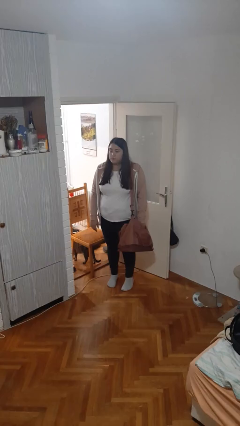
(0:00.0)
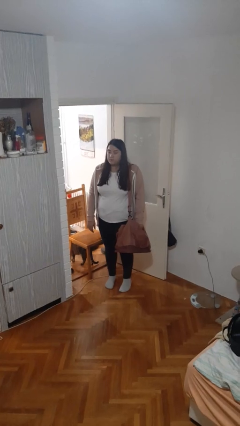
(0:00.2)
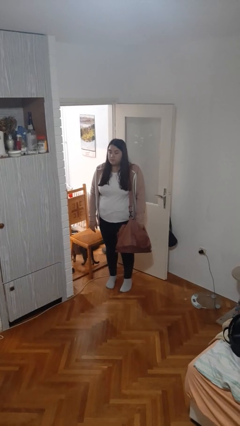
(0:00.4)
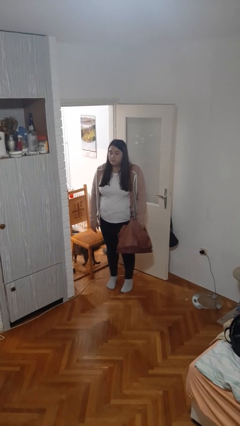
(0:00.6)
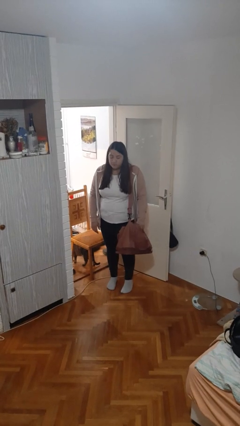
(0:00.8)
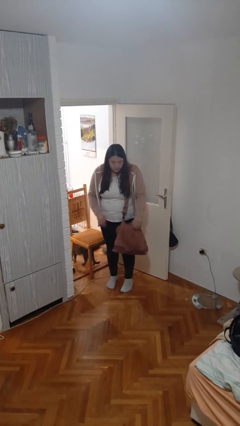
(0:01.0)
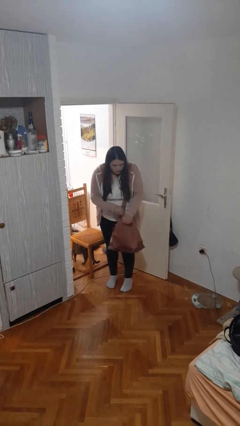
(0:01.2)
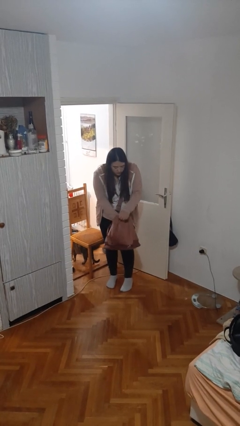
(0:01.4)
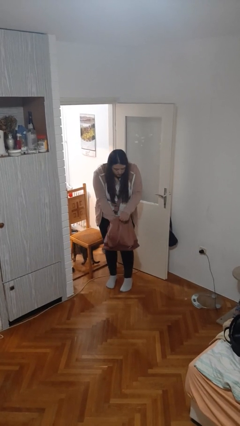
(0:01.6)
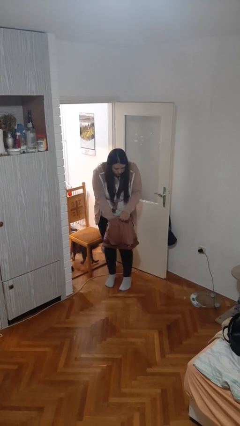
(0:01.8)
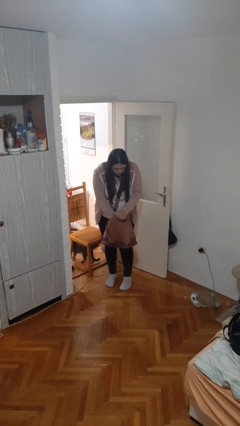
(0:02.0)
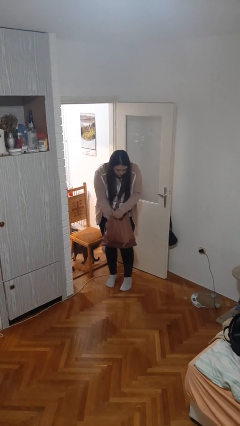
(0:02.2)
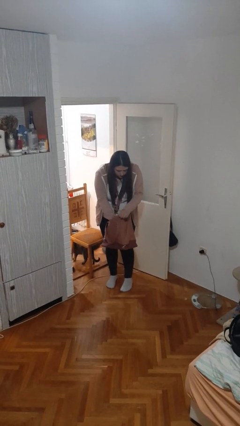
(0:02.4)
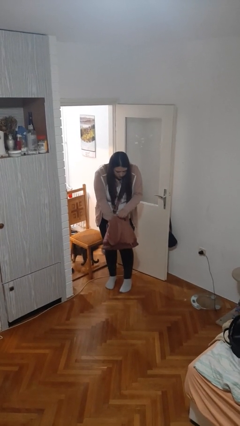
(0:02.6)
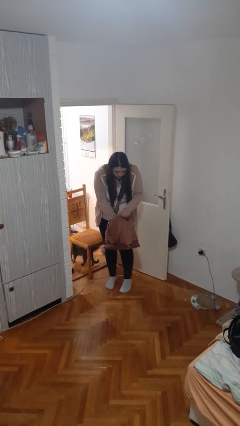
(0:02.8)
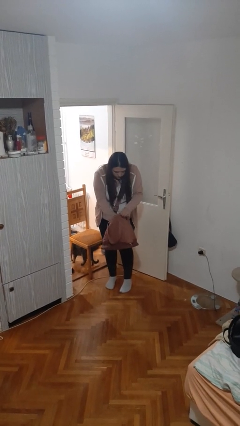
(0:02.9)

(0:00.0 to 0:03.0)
person searches in purse

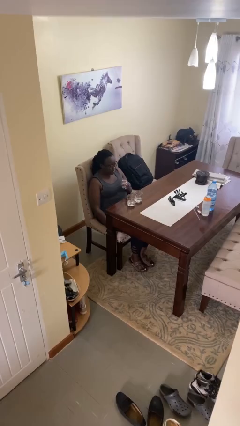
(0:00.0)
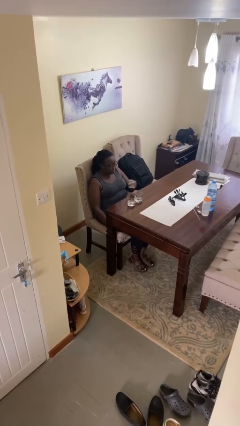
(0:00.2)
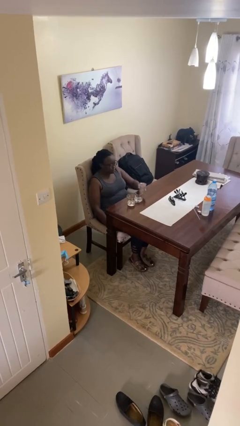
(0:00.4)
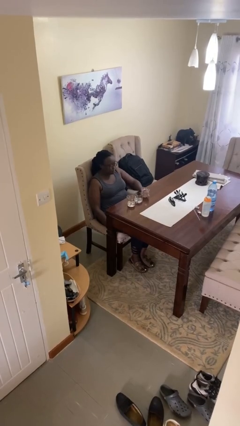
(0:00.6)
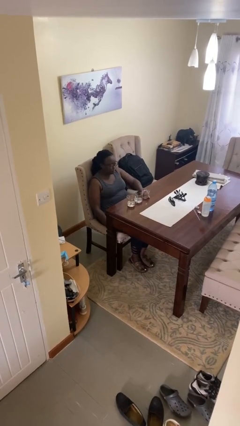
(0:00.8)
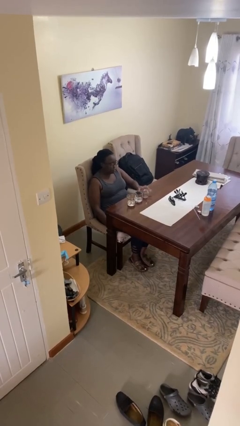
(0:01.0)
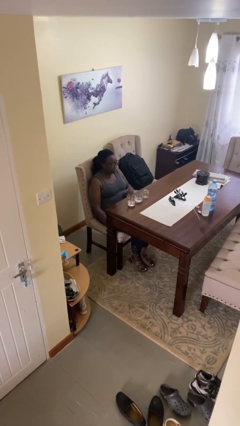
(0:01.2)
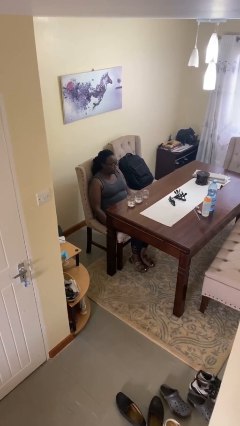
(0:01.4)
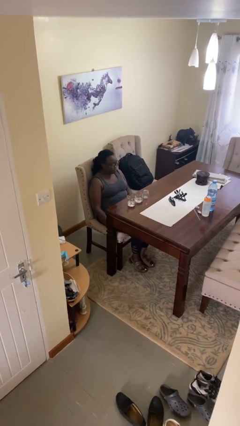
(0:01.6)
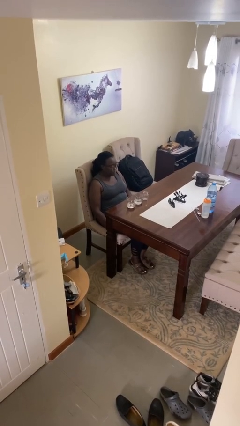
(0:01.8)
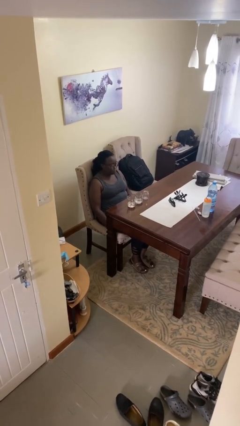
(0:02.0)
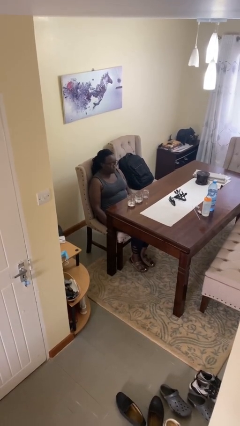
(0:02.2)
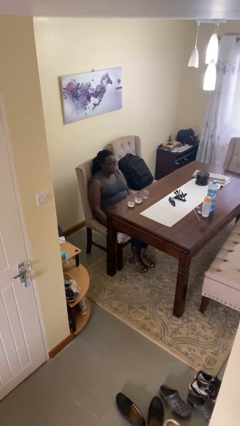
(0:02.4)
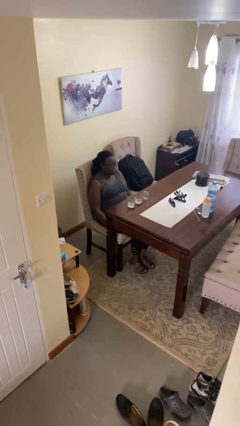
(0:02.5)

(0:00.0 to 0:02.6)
person puts down object on table

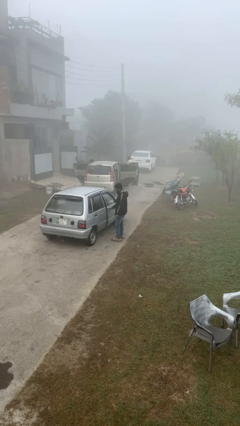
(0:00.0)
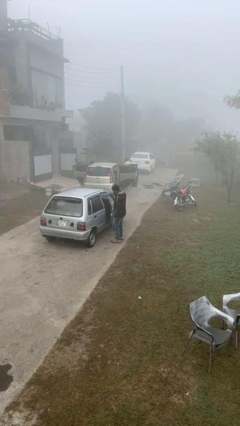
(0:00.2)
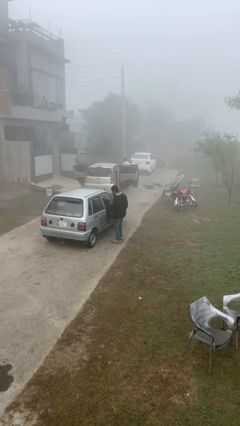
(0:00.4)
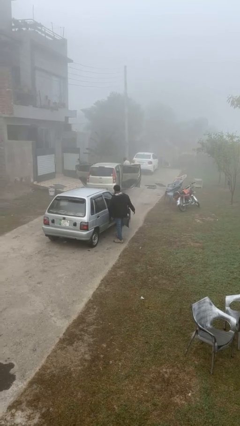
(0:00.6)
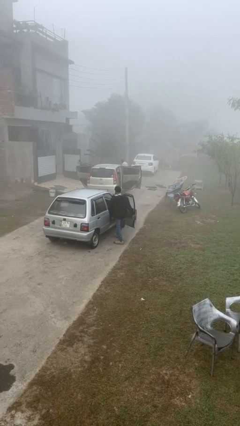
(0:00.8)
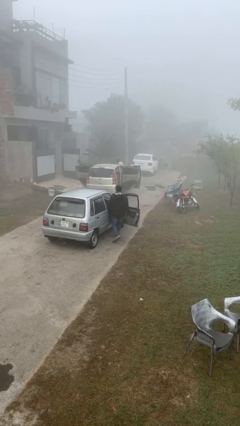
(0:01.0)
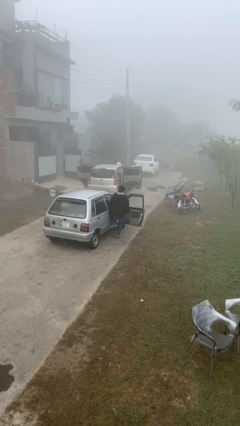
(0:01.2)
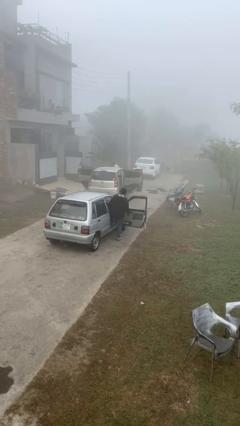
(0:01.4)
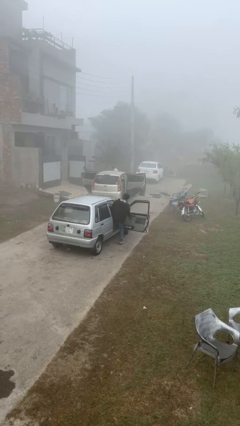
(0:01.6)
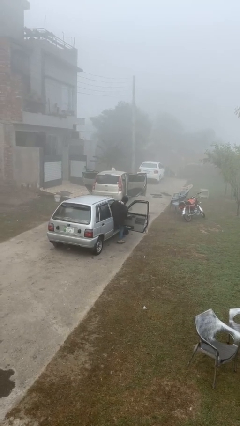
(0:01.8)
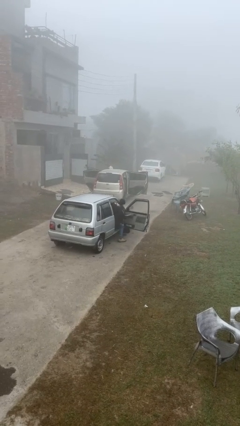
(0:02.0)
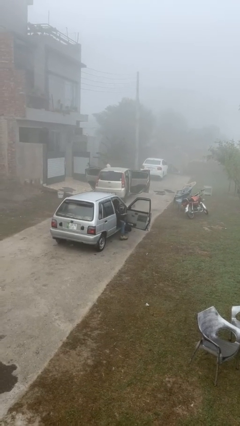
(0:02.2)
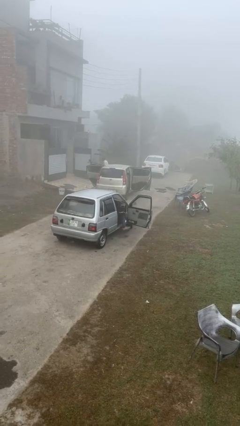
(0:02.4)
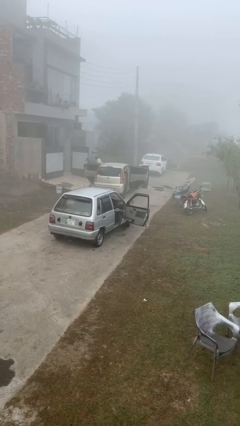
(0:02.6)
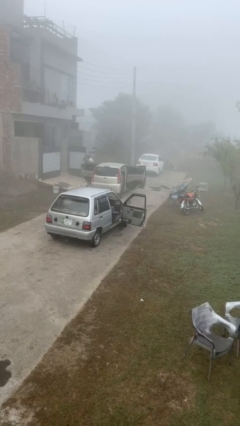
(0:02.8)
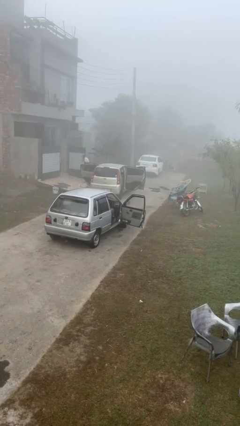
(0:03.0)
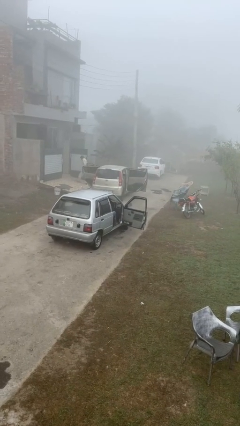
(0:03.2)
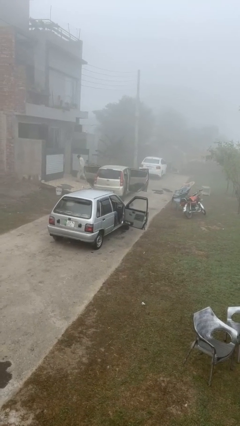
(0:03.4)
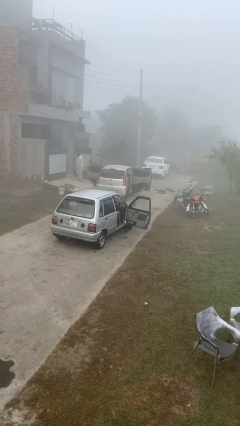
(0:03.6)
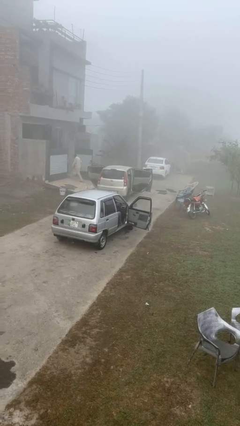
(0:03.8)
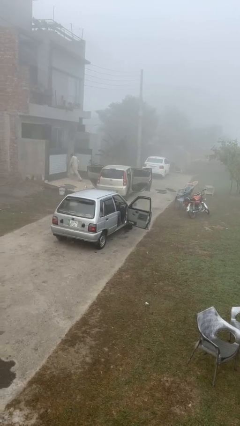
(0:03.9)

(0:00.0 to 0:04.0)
person enters car

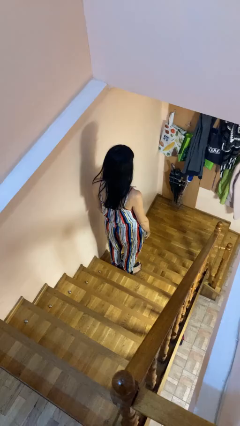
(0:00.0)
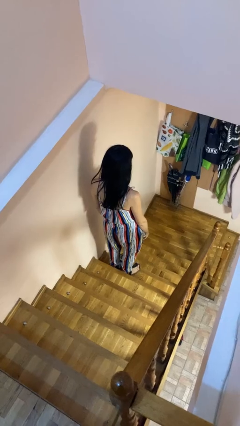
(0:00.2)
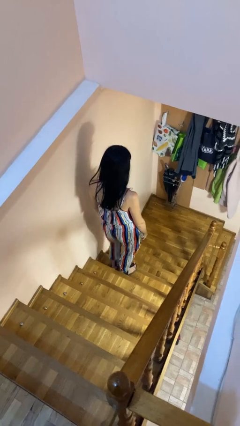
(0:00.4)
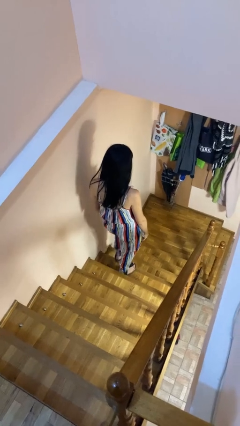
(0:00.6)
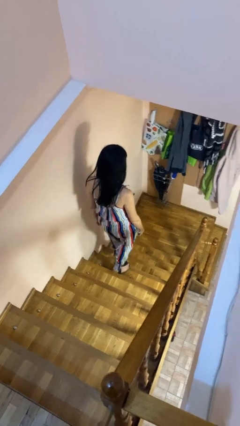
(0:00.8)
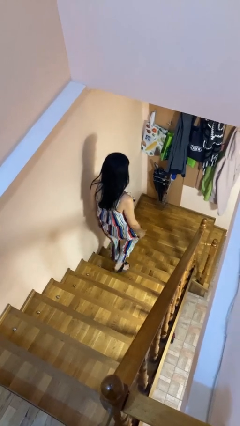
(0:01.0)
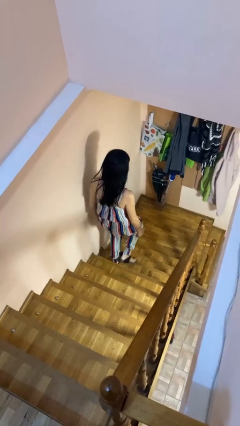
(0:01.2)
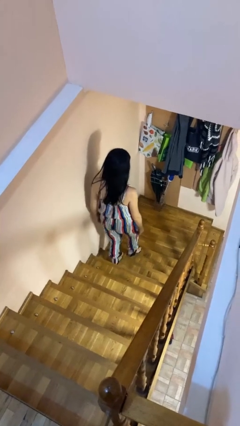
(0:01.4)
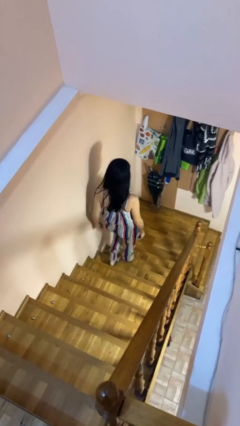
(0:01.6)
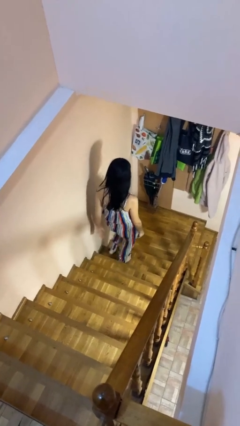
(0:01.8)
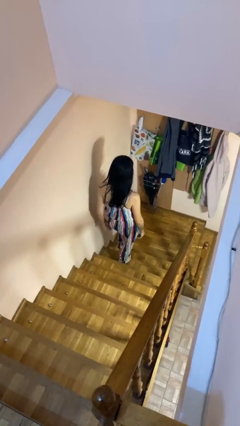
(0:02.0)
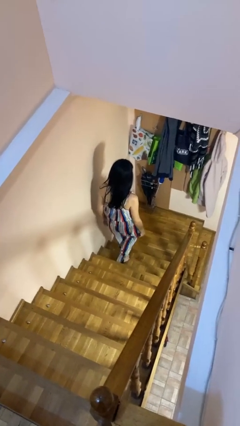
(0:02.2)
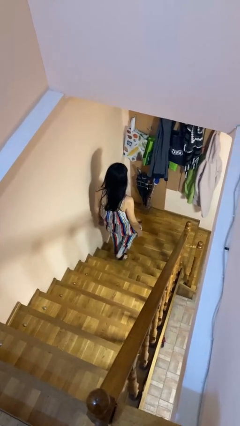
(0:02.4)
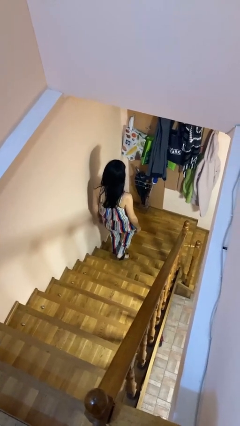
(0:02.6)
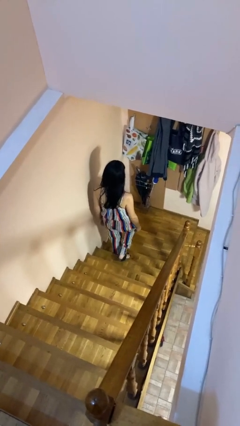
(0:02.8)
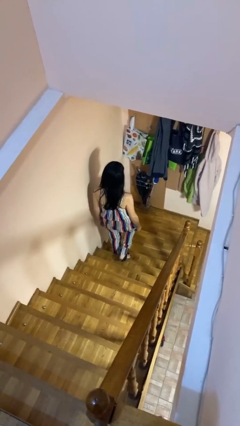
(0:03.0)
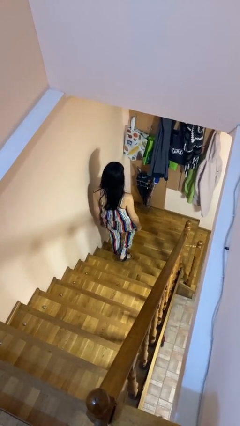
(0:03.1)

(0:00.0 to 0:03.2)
person climbs down stairs

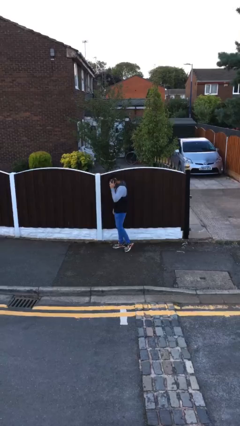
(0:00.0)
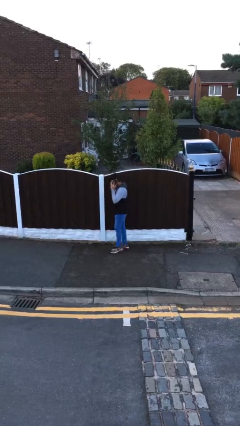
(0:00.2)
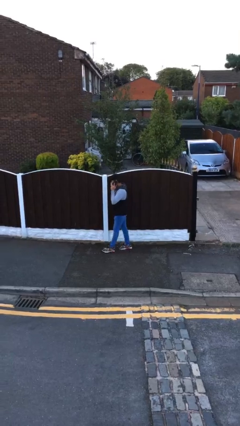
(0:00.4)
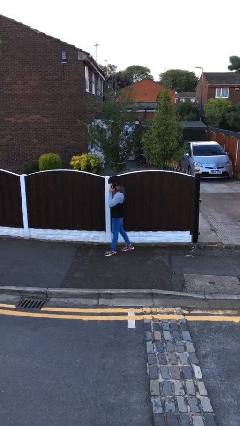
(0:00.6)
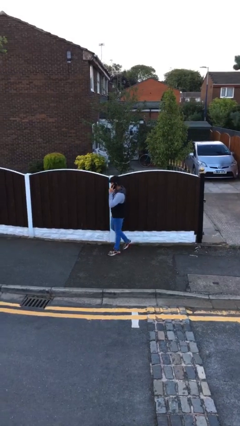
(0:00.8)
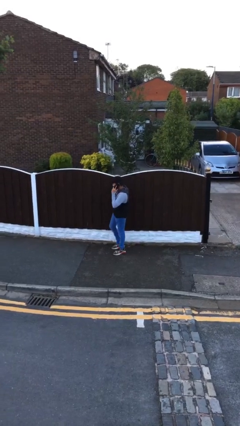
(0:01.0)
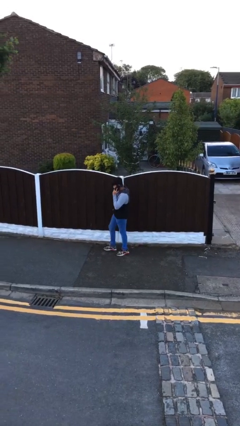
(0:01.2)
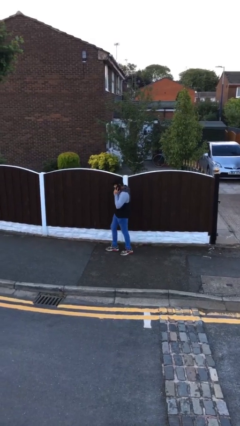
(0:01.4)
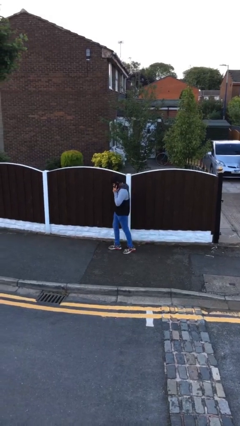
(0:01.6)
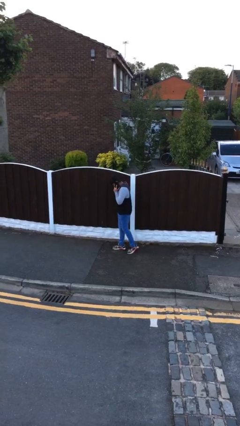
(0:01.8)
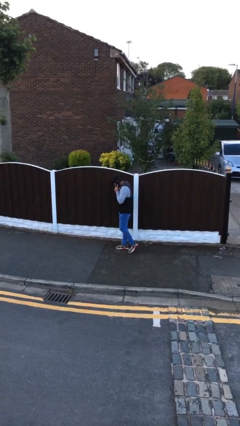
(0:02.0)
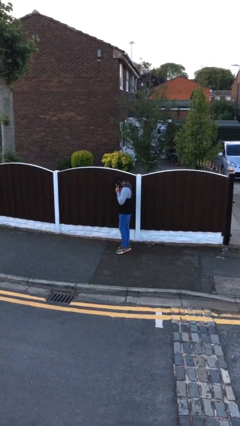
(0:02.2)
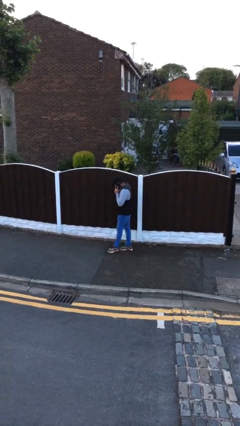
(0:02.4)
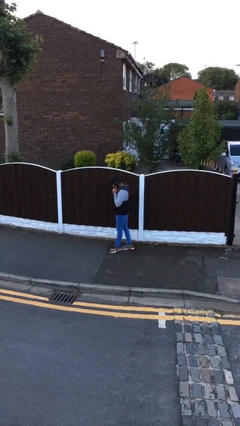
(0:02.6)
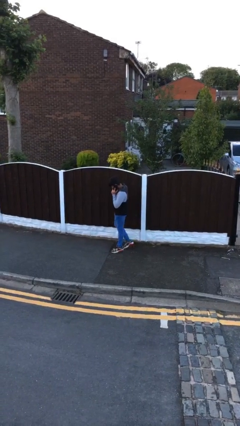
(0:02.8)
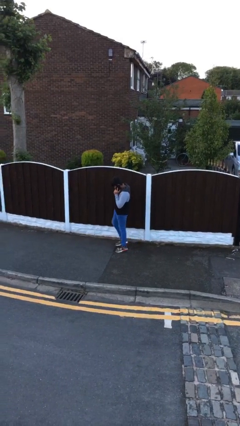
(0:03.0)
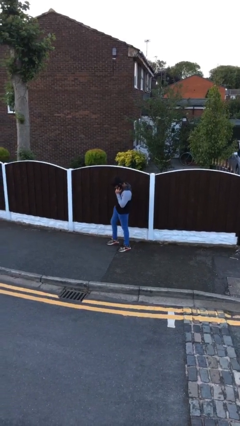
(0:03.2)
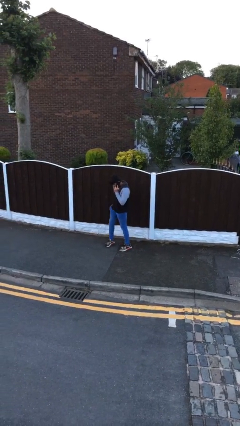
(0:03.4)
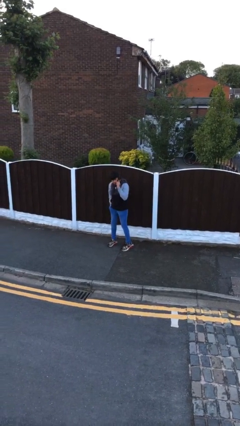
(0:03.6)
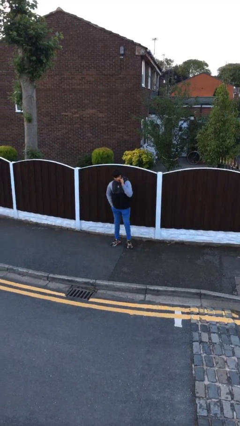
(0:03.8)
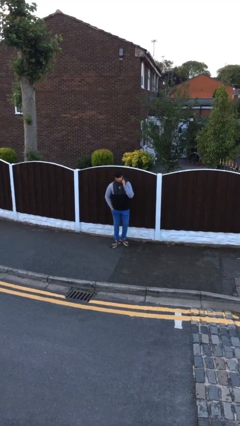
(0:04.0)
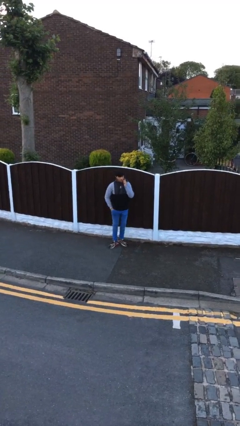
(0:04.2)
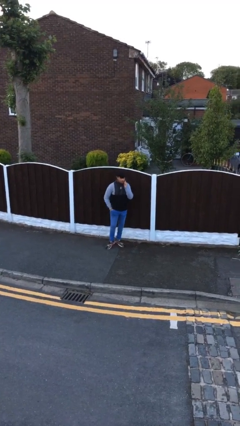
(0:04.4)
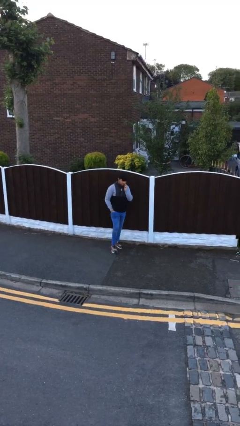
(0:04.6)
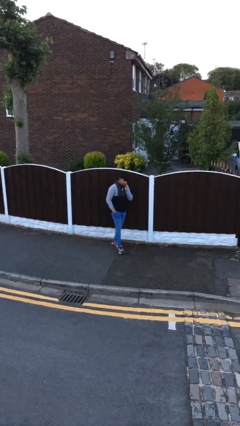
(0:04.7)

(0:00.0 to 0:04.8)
person talks on phone

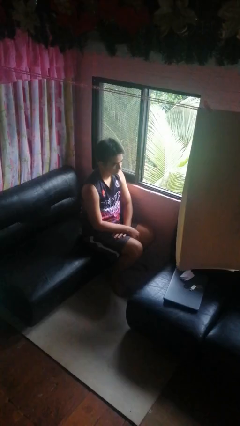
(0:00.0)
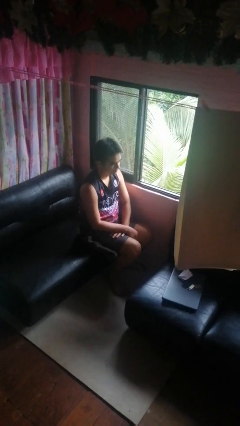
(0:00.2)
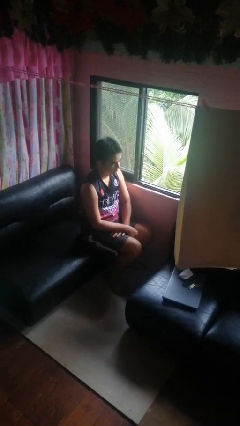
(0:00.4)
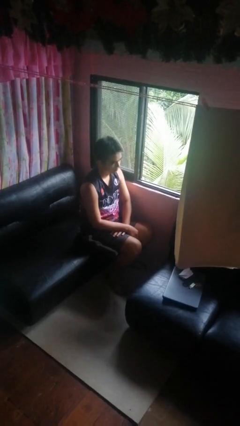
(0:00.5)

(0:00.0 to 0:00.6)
person gestures be quiet
